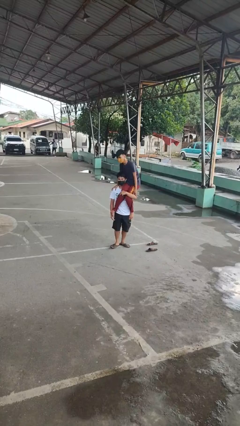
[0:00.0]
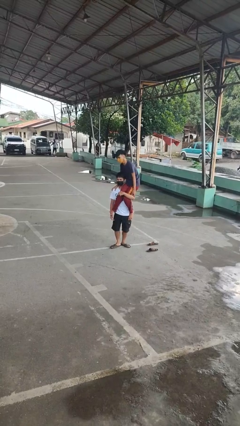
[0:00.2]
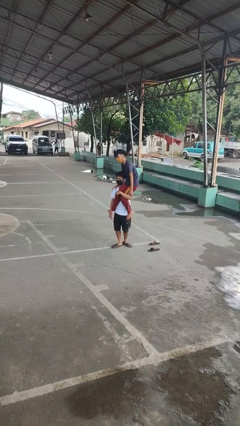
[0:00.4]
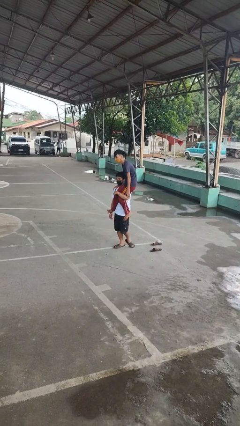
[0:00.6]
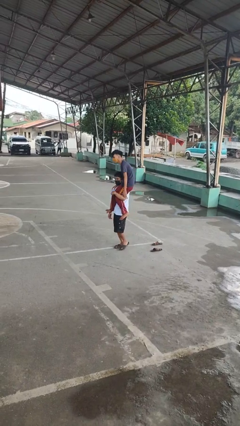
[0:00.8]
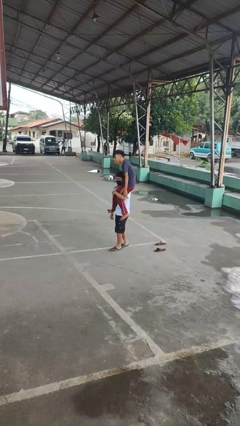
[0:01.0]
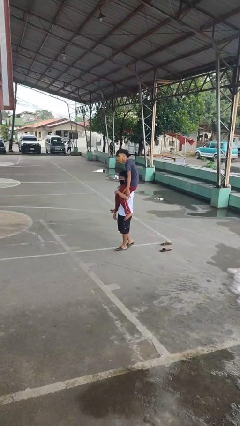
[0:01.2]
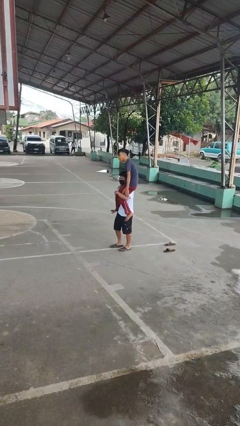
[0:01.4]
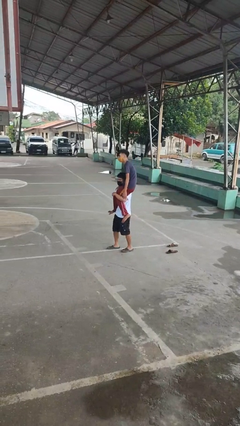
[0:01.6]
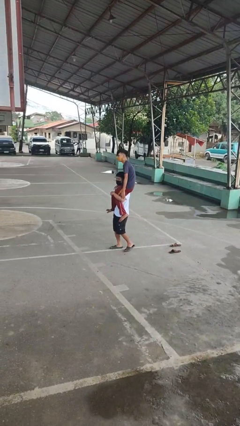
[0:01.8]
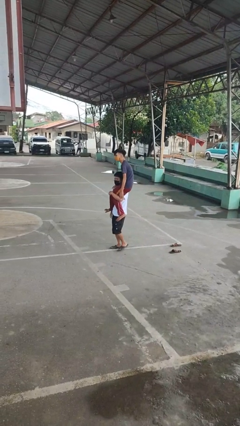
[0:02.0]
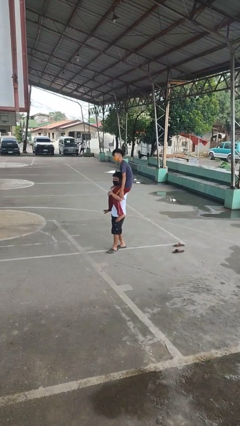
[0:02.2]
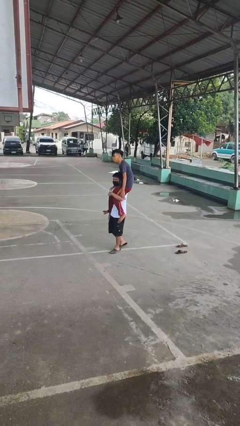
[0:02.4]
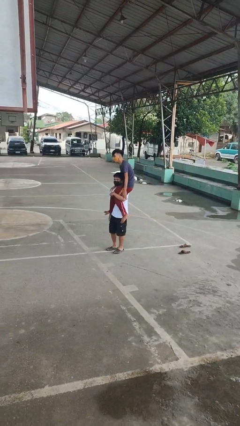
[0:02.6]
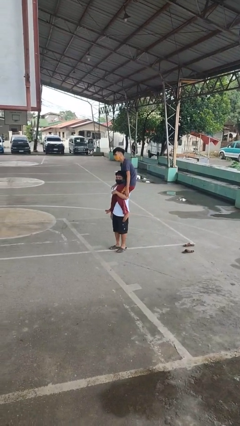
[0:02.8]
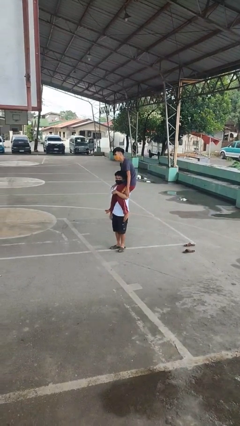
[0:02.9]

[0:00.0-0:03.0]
person carries person on shoulders

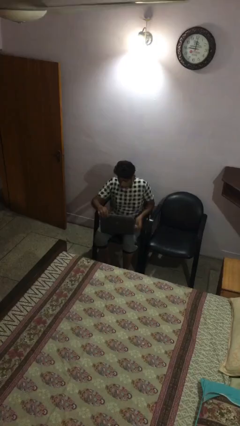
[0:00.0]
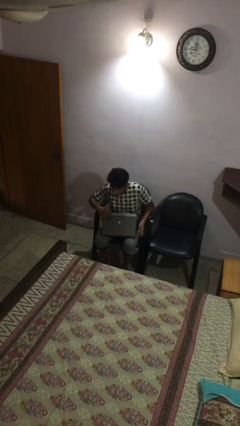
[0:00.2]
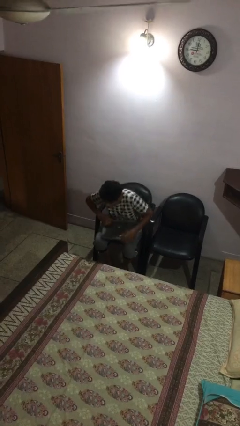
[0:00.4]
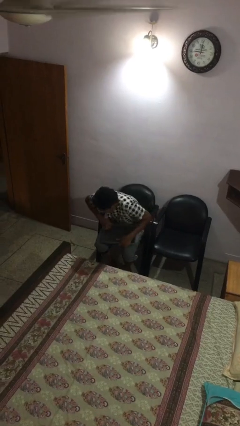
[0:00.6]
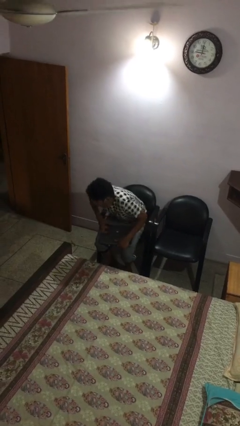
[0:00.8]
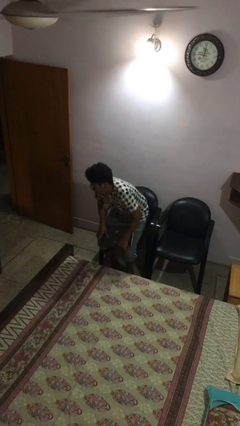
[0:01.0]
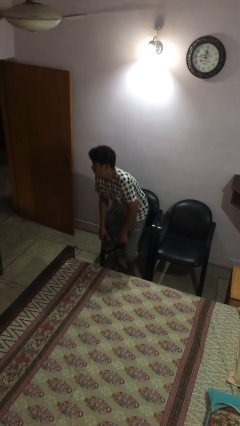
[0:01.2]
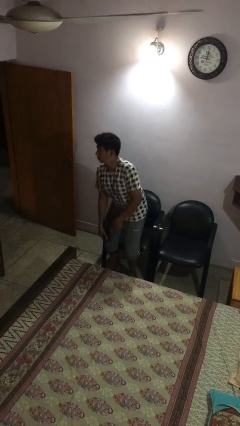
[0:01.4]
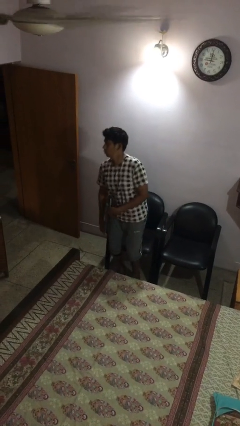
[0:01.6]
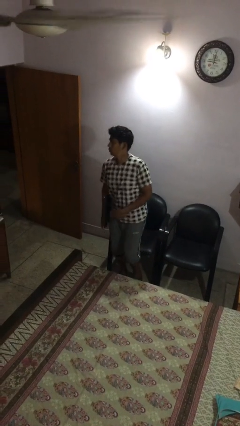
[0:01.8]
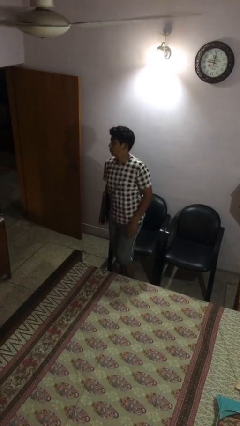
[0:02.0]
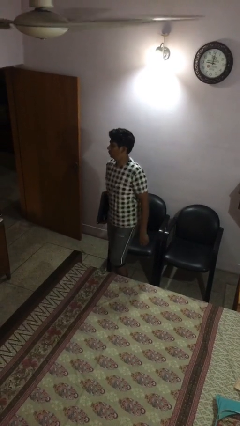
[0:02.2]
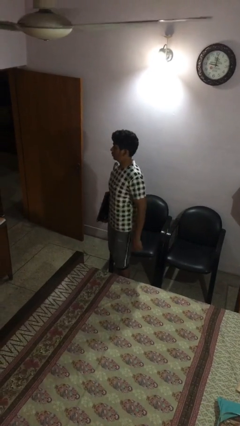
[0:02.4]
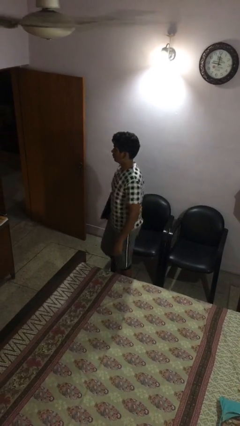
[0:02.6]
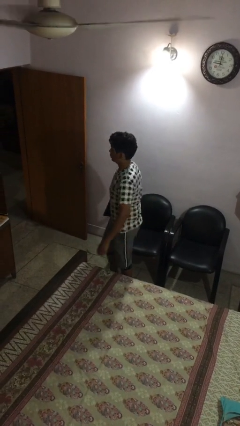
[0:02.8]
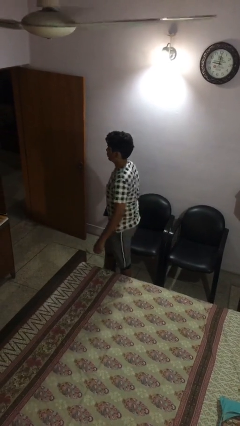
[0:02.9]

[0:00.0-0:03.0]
person stands up

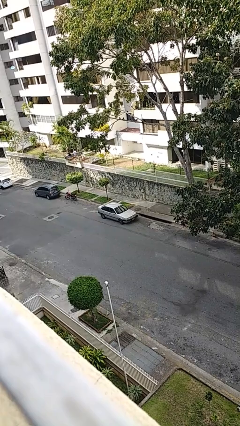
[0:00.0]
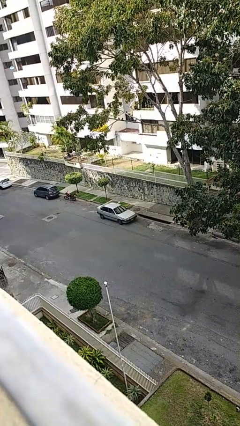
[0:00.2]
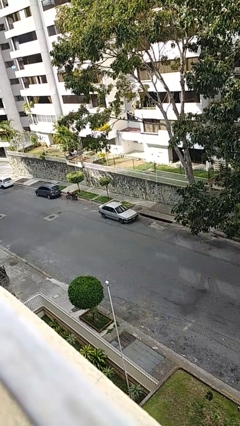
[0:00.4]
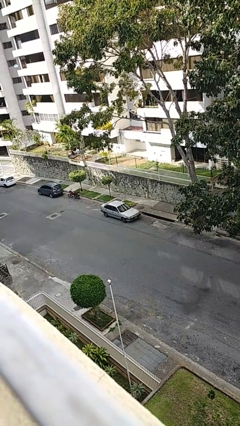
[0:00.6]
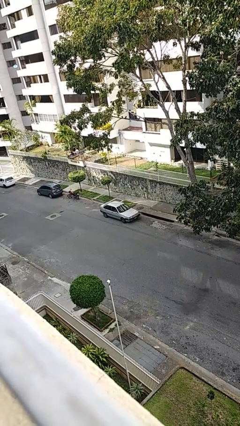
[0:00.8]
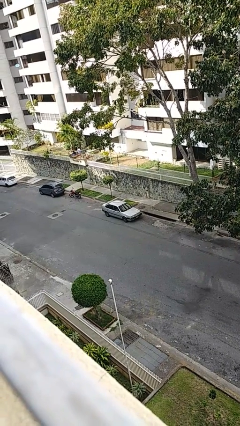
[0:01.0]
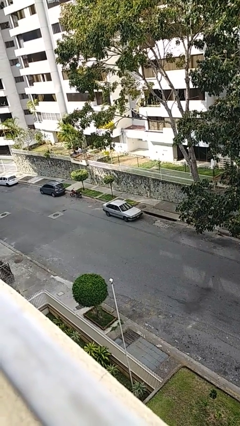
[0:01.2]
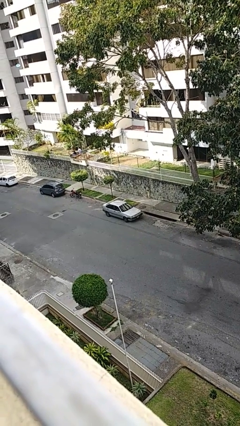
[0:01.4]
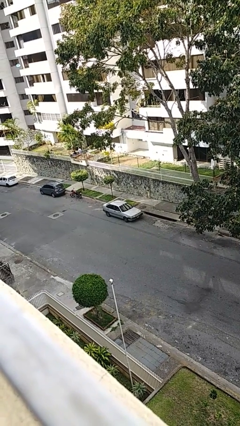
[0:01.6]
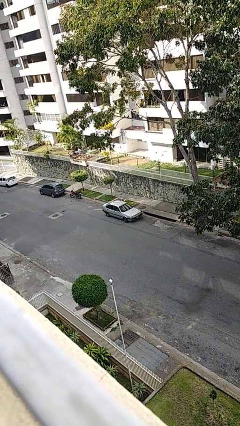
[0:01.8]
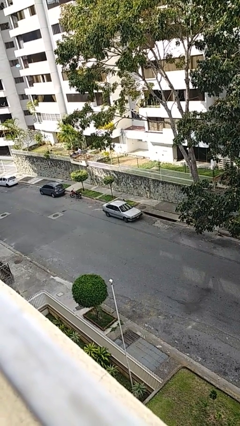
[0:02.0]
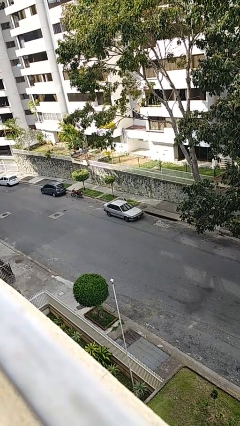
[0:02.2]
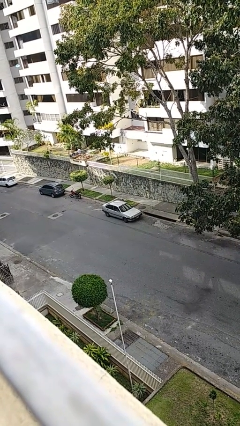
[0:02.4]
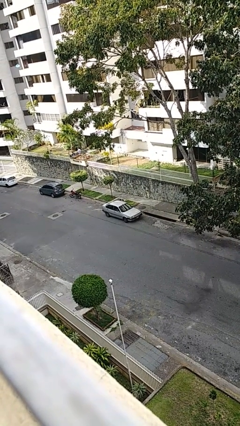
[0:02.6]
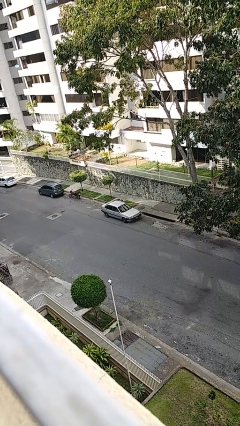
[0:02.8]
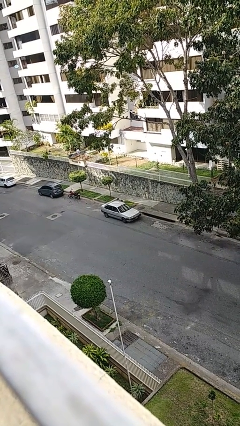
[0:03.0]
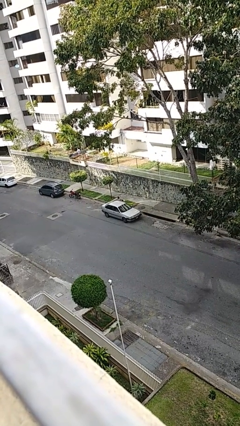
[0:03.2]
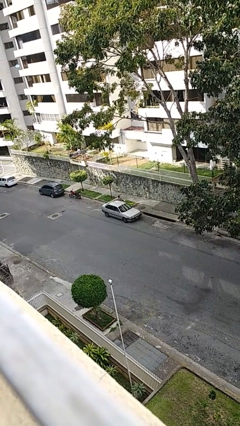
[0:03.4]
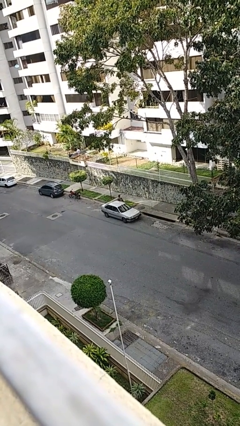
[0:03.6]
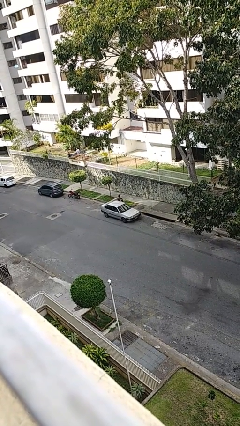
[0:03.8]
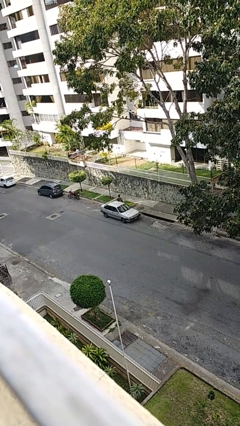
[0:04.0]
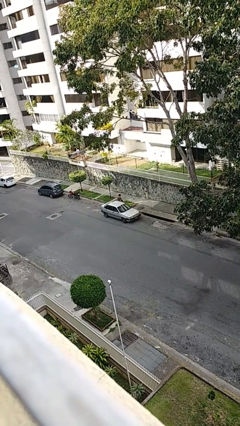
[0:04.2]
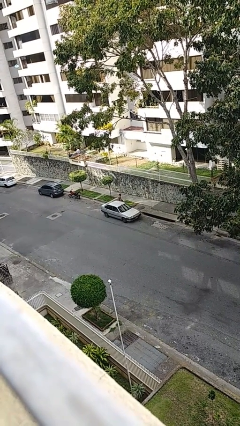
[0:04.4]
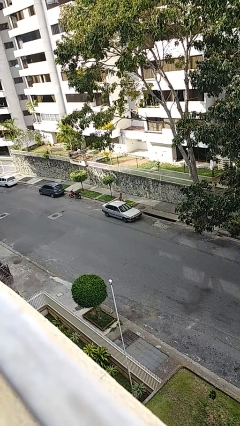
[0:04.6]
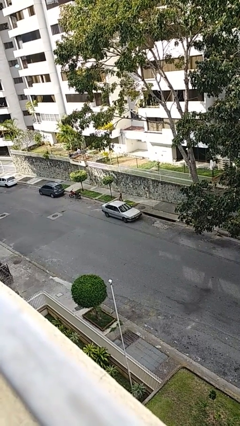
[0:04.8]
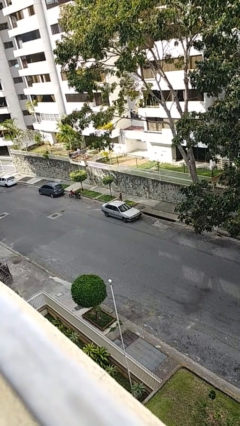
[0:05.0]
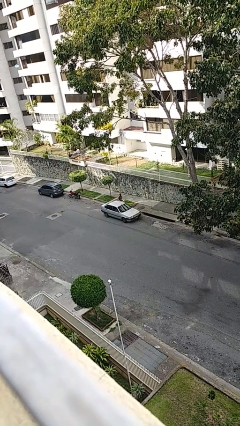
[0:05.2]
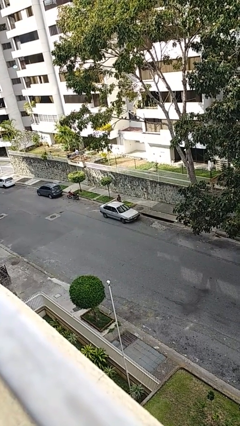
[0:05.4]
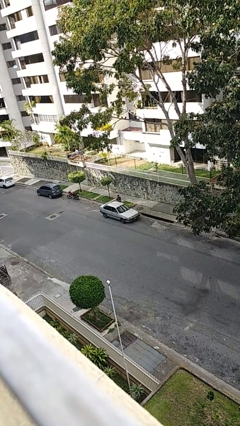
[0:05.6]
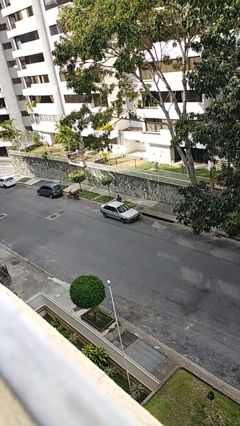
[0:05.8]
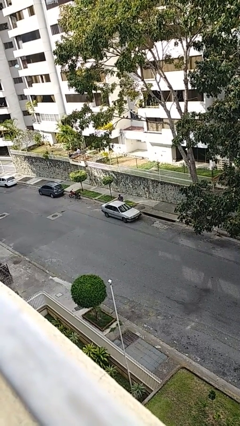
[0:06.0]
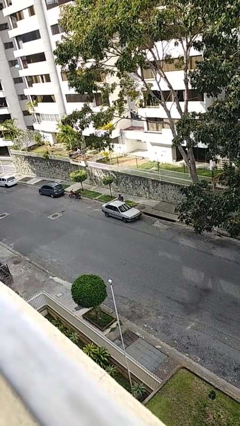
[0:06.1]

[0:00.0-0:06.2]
car drops off person

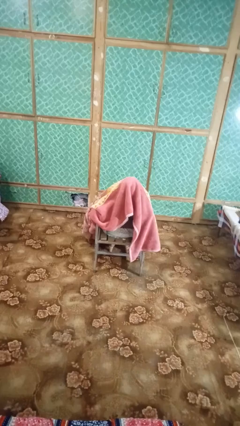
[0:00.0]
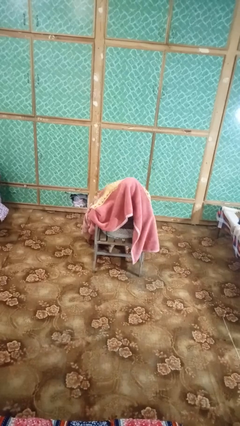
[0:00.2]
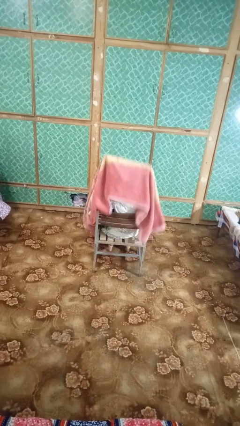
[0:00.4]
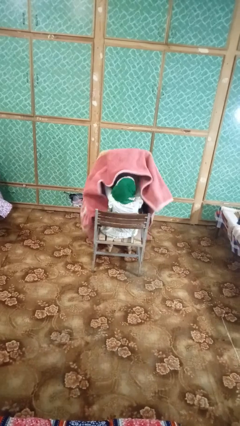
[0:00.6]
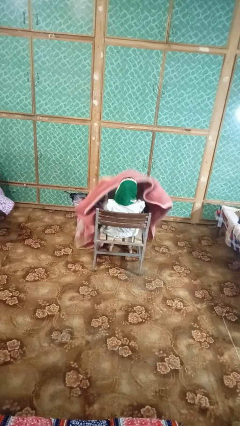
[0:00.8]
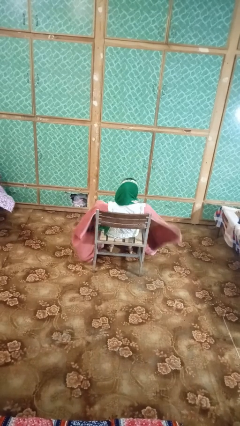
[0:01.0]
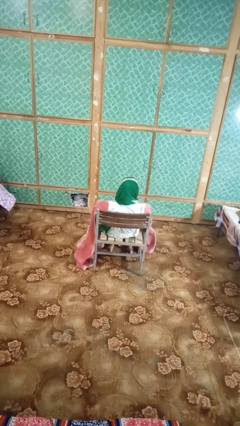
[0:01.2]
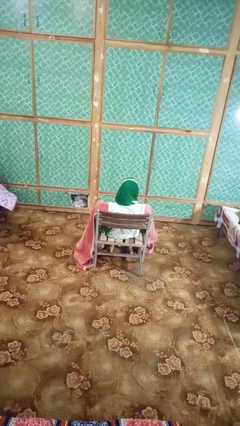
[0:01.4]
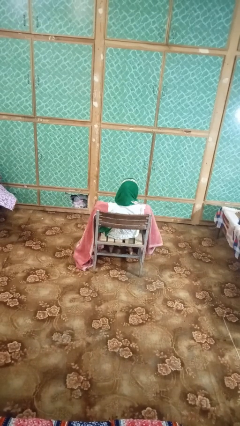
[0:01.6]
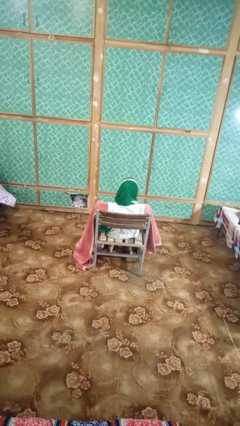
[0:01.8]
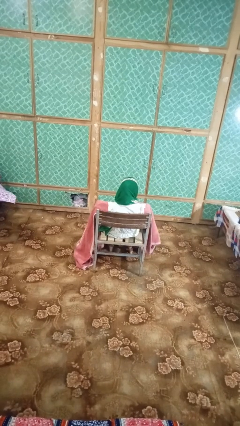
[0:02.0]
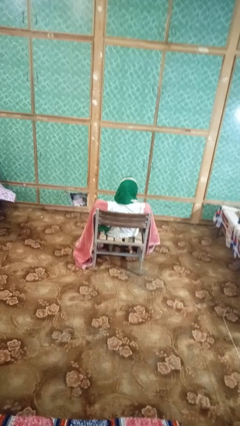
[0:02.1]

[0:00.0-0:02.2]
person uncovers with blanket

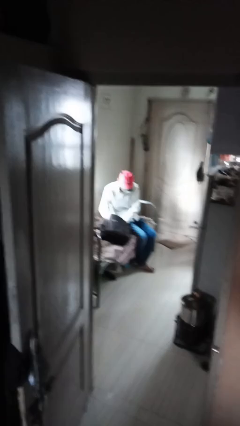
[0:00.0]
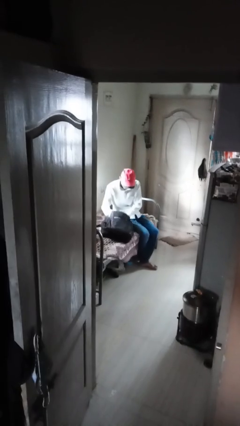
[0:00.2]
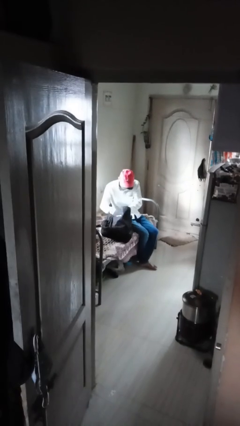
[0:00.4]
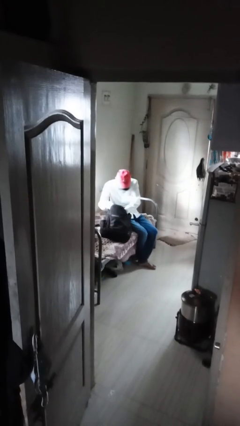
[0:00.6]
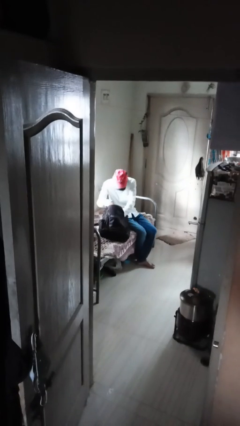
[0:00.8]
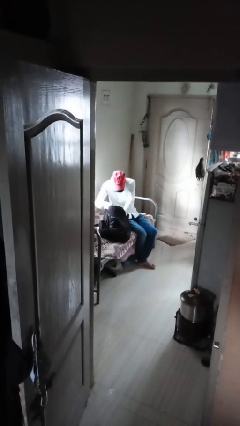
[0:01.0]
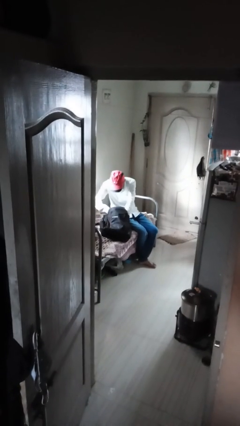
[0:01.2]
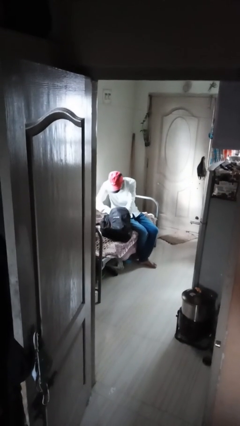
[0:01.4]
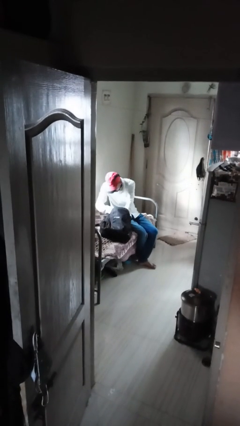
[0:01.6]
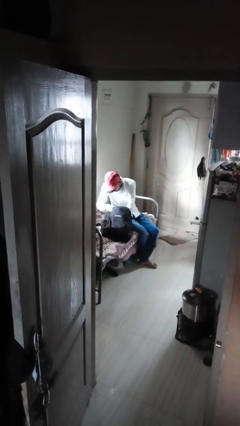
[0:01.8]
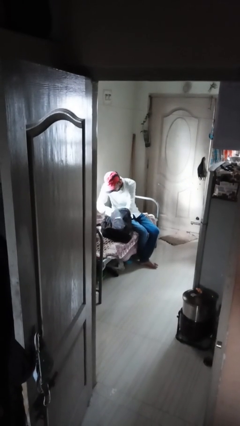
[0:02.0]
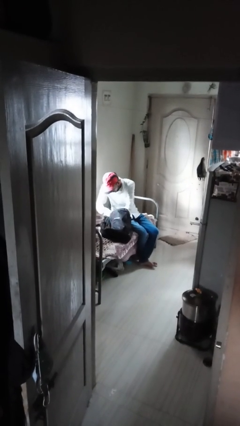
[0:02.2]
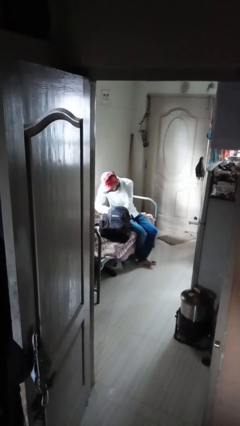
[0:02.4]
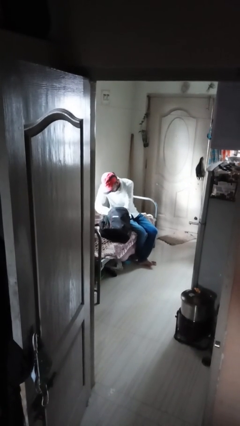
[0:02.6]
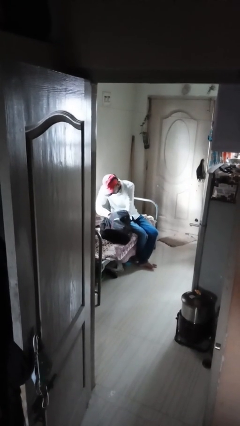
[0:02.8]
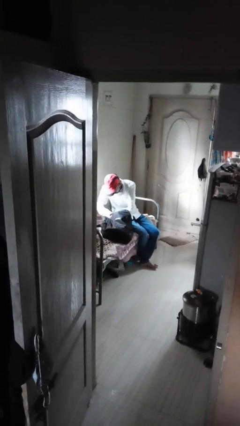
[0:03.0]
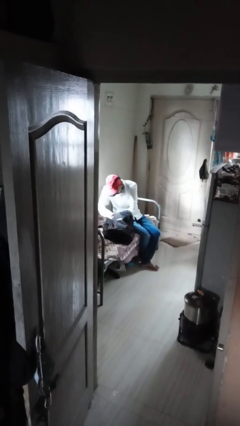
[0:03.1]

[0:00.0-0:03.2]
person searches in backpack
